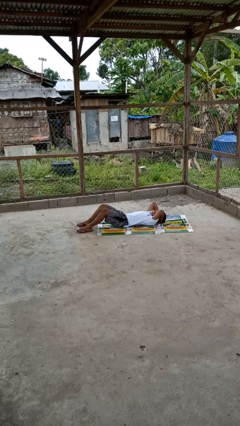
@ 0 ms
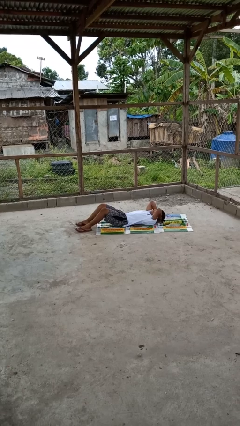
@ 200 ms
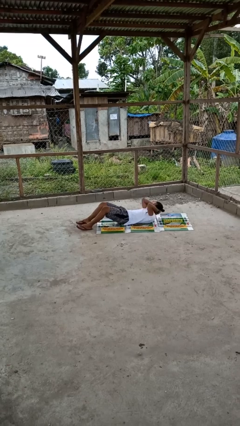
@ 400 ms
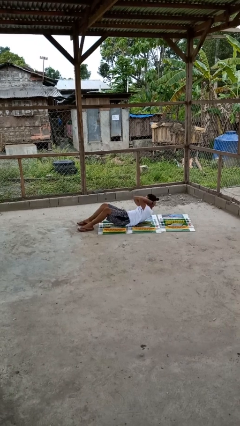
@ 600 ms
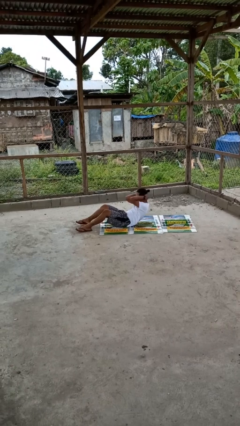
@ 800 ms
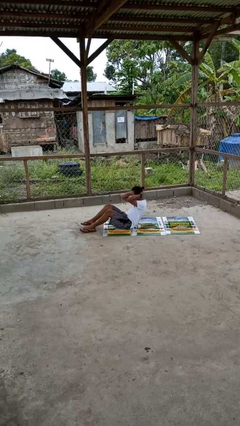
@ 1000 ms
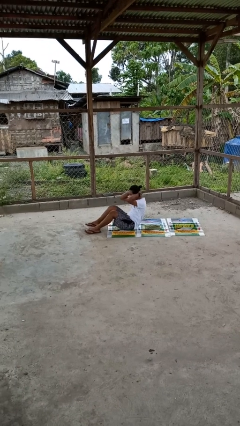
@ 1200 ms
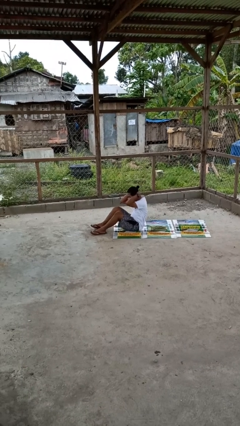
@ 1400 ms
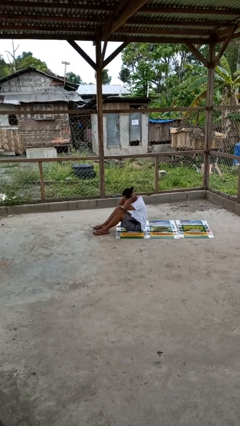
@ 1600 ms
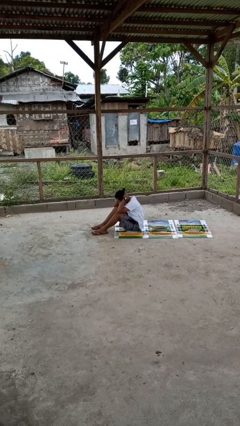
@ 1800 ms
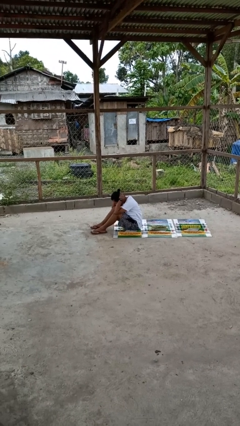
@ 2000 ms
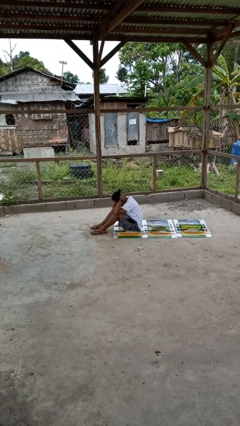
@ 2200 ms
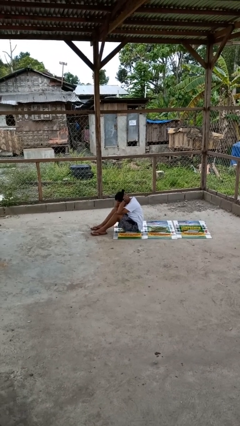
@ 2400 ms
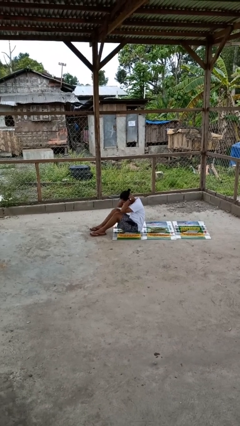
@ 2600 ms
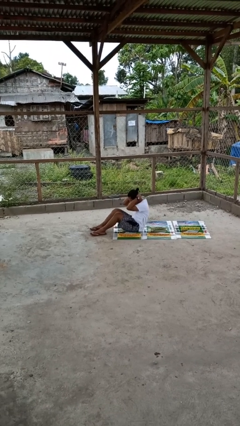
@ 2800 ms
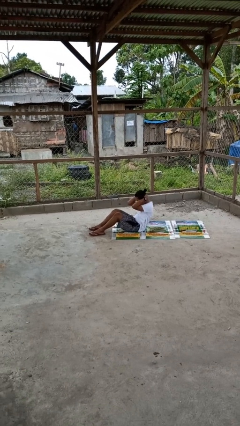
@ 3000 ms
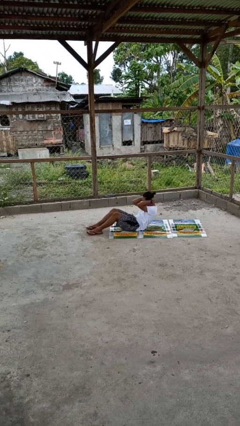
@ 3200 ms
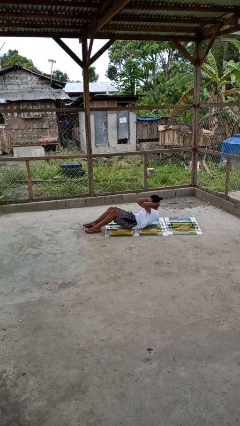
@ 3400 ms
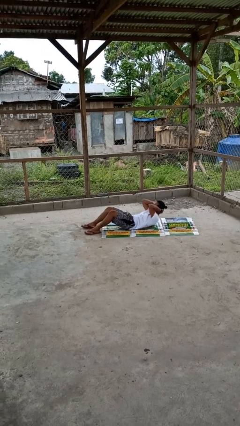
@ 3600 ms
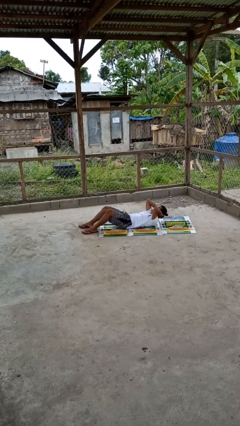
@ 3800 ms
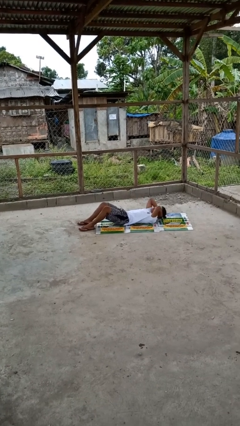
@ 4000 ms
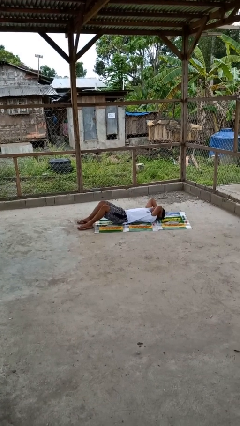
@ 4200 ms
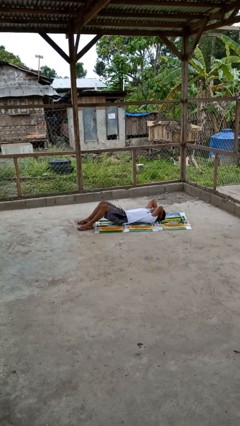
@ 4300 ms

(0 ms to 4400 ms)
person exercises with situp

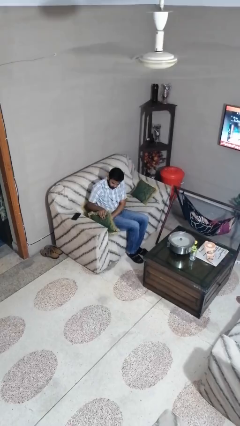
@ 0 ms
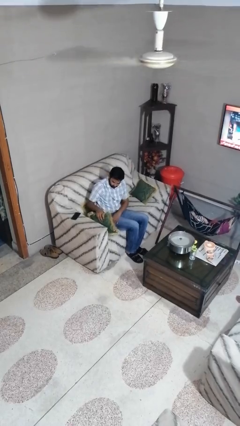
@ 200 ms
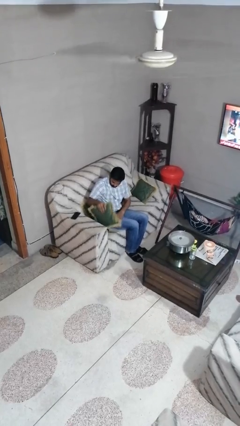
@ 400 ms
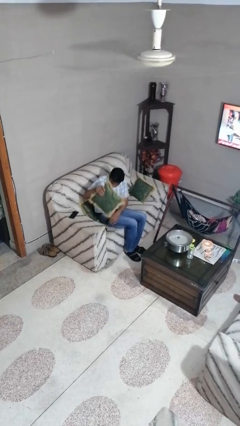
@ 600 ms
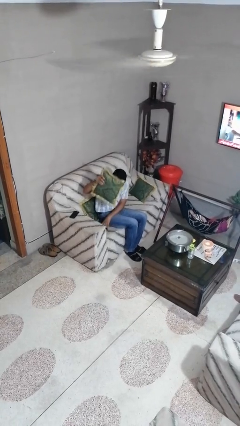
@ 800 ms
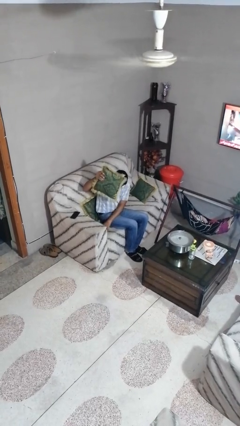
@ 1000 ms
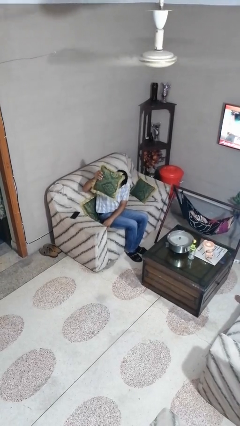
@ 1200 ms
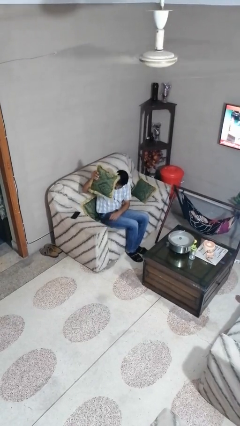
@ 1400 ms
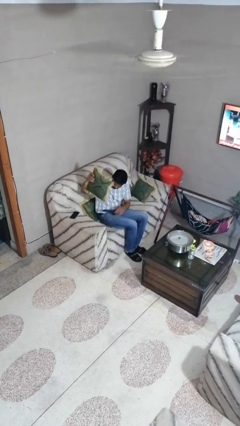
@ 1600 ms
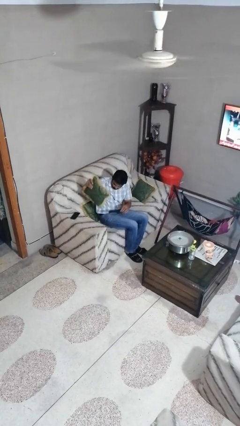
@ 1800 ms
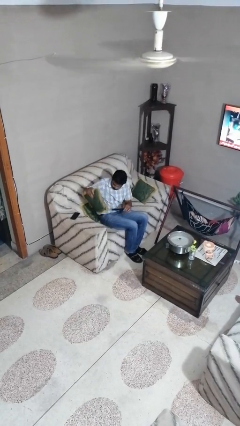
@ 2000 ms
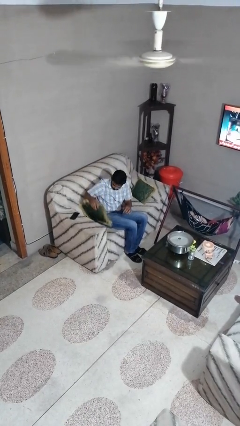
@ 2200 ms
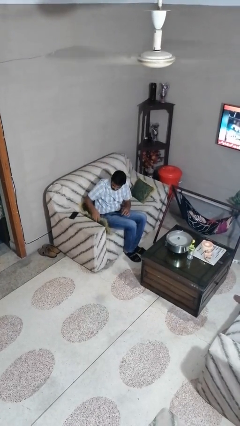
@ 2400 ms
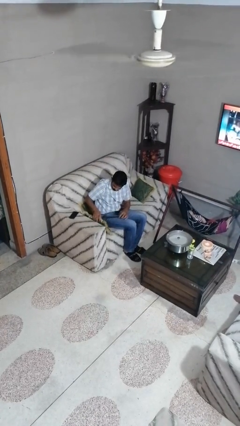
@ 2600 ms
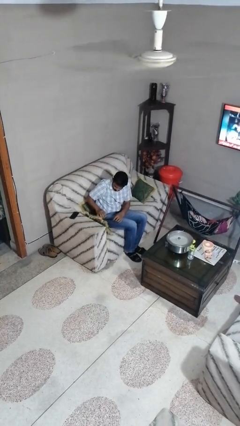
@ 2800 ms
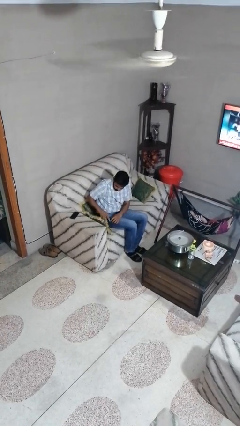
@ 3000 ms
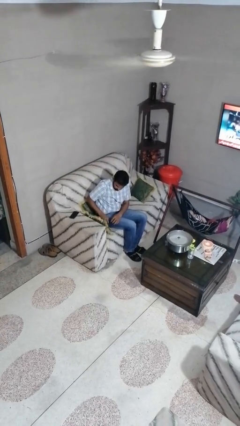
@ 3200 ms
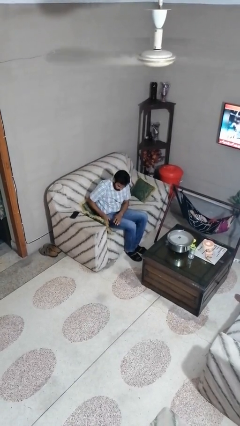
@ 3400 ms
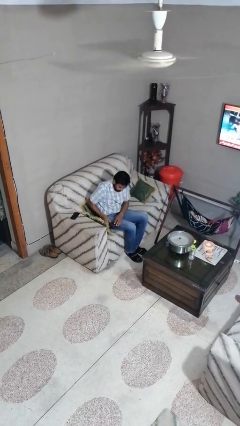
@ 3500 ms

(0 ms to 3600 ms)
person searches in couch

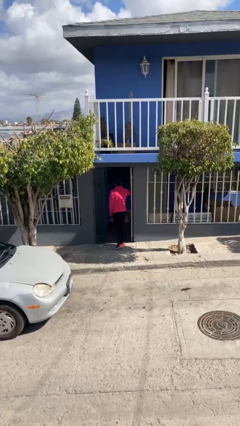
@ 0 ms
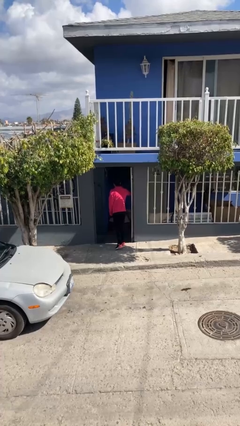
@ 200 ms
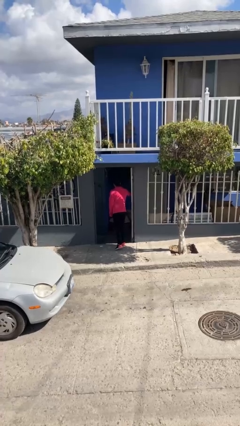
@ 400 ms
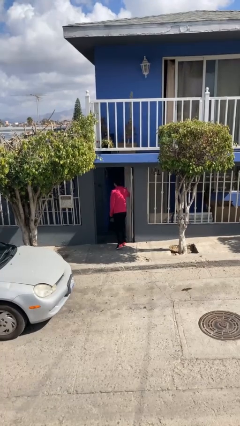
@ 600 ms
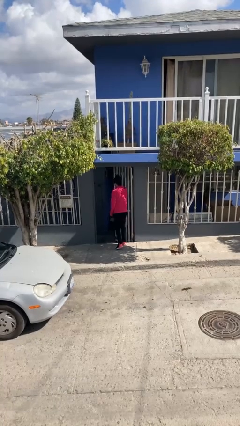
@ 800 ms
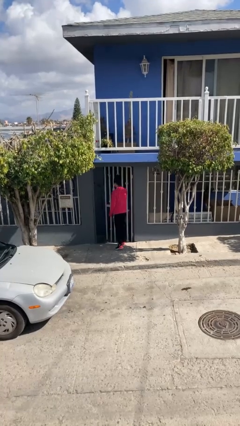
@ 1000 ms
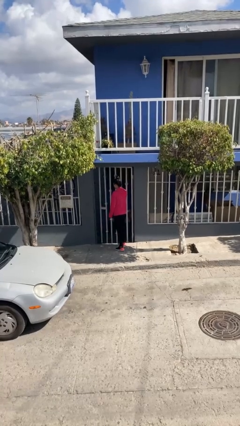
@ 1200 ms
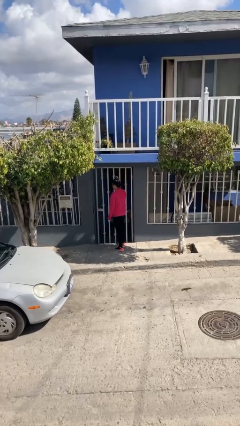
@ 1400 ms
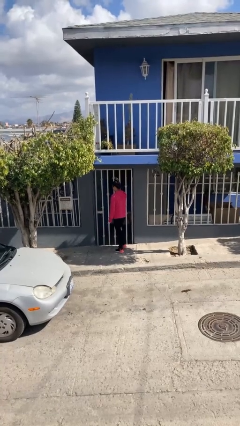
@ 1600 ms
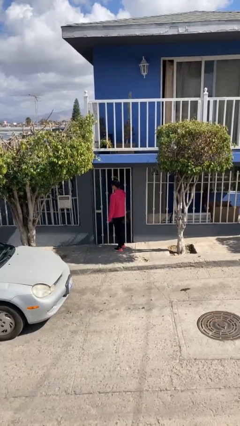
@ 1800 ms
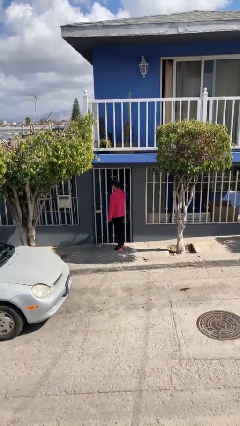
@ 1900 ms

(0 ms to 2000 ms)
person closes facility door

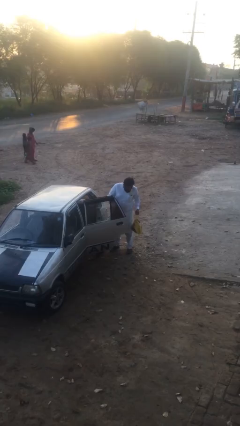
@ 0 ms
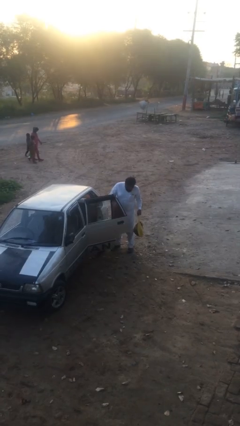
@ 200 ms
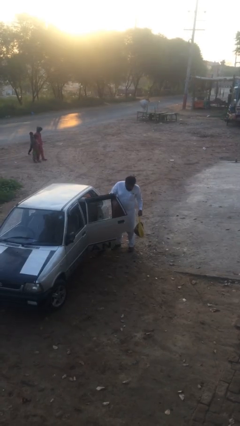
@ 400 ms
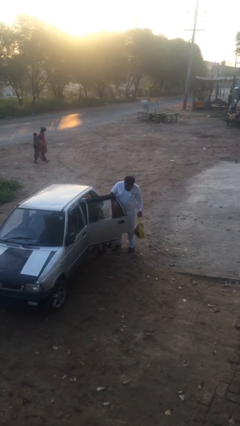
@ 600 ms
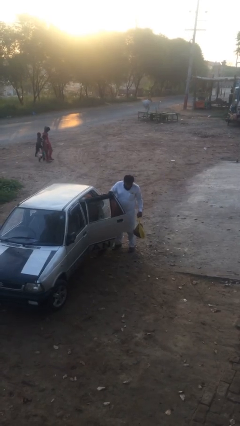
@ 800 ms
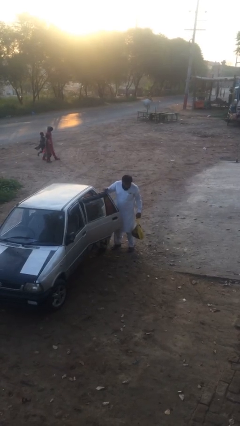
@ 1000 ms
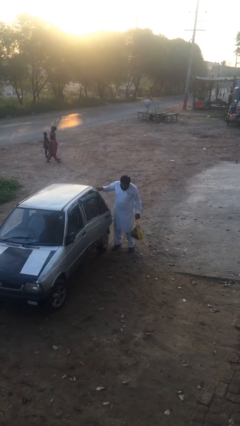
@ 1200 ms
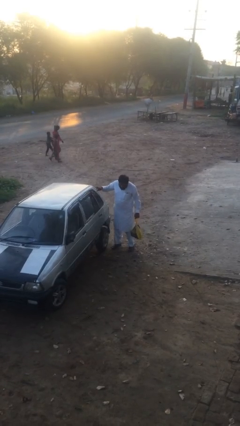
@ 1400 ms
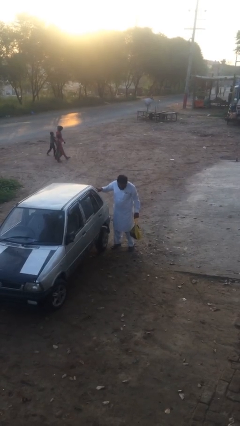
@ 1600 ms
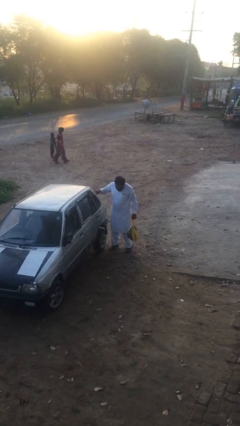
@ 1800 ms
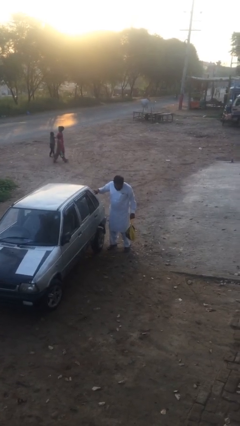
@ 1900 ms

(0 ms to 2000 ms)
person closes car door

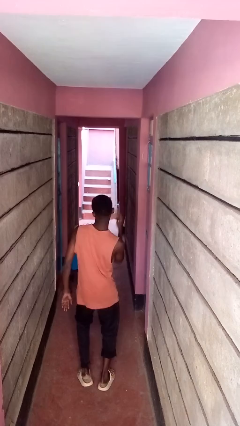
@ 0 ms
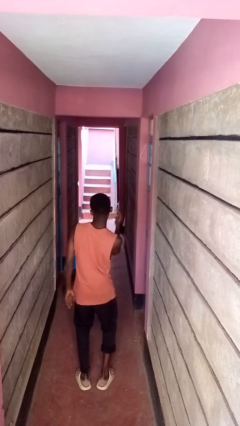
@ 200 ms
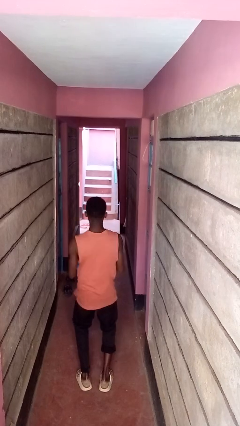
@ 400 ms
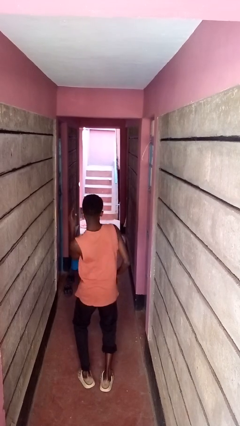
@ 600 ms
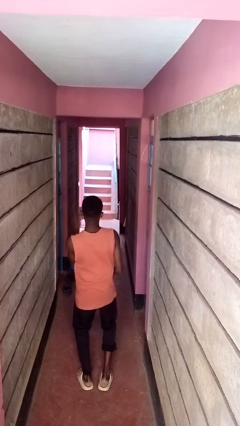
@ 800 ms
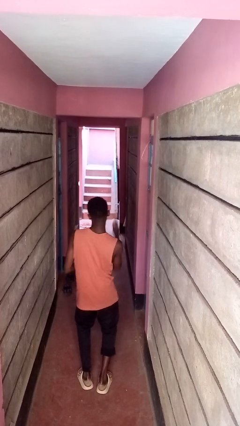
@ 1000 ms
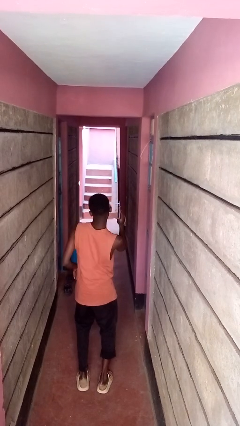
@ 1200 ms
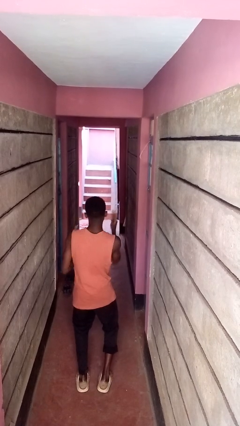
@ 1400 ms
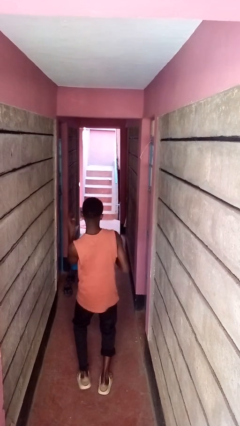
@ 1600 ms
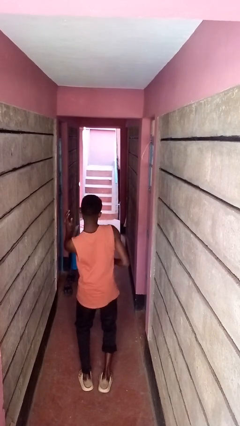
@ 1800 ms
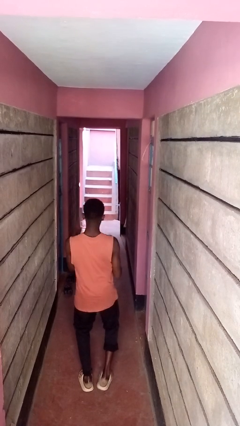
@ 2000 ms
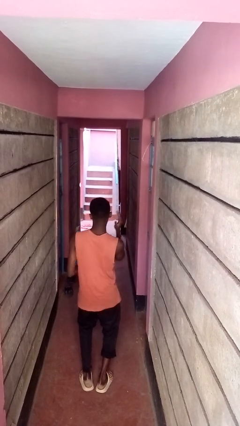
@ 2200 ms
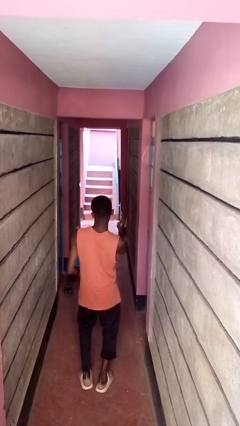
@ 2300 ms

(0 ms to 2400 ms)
person dances in place

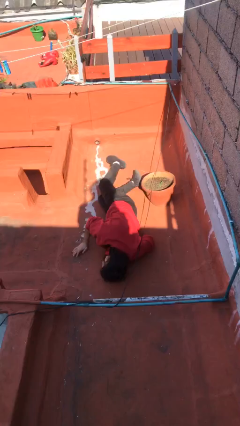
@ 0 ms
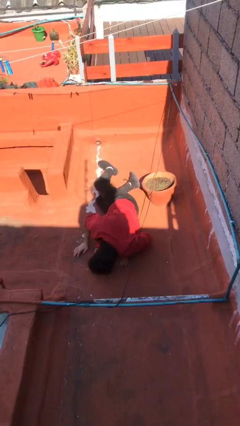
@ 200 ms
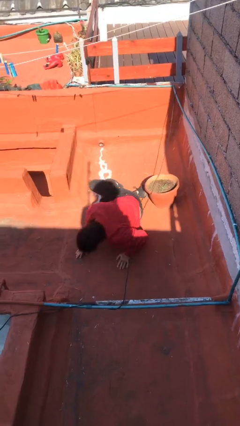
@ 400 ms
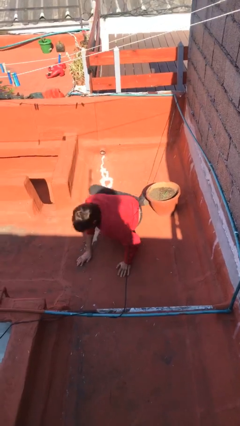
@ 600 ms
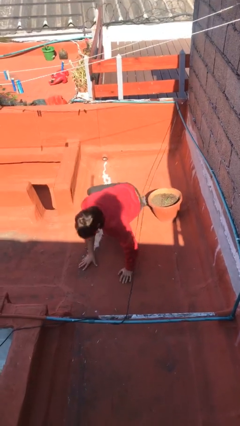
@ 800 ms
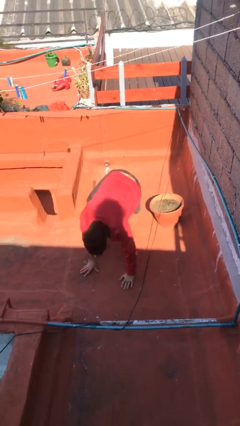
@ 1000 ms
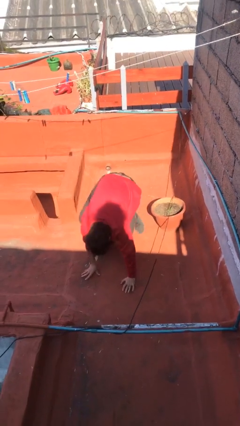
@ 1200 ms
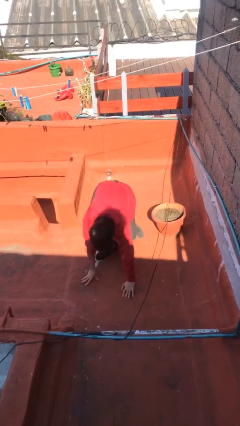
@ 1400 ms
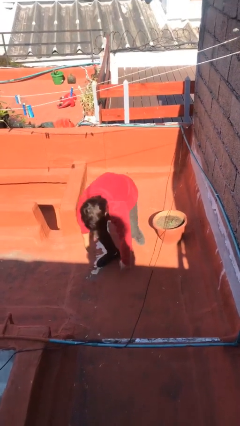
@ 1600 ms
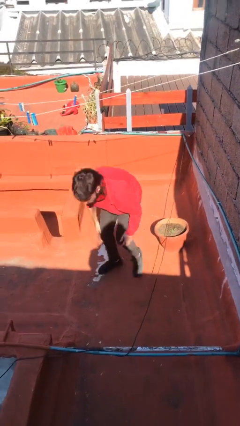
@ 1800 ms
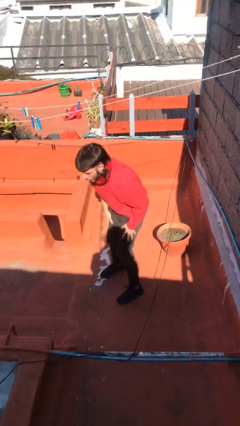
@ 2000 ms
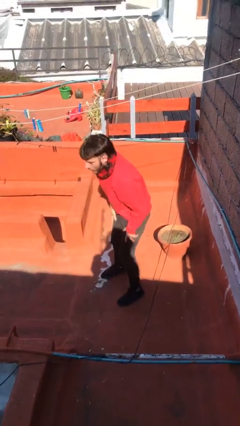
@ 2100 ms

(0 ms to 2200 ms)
person stands up from floor

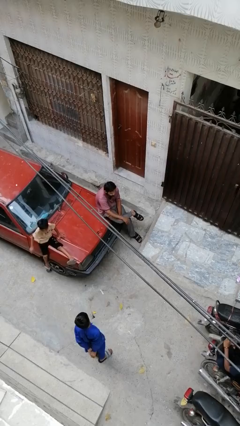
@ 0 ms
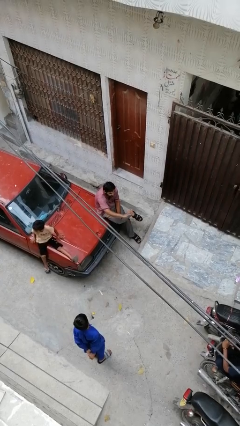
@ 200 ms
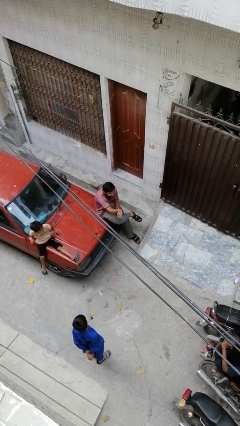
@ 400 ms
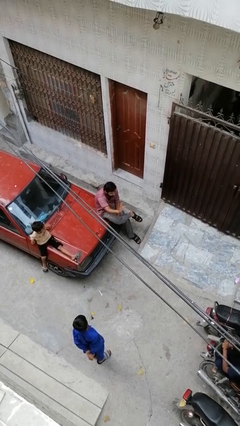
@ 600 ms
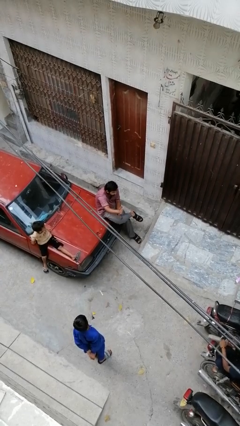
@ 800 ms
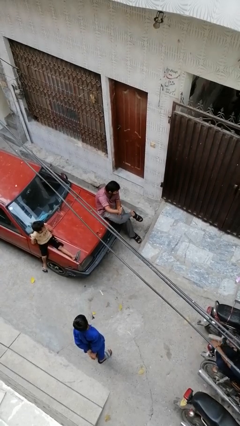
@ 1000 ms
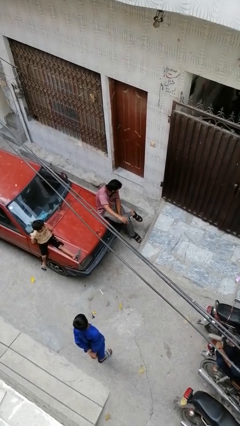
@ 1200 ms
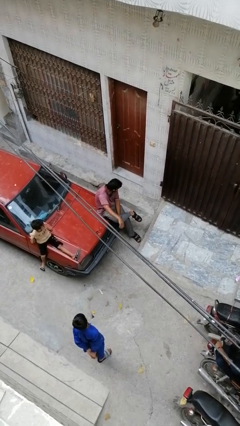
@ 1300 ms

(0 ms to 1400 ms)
person waves at person
